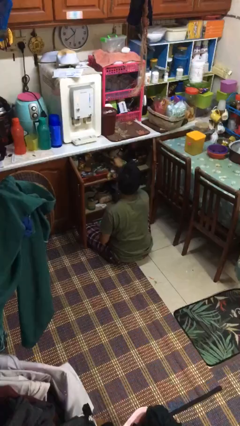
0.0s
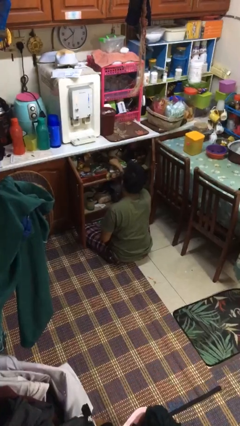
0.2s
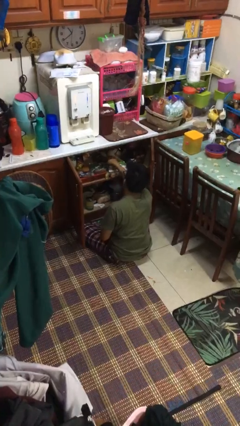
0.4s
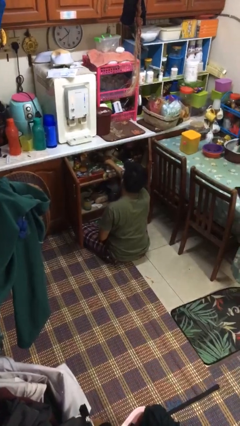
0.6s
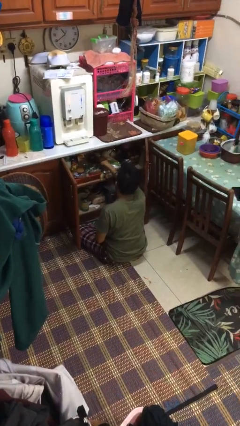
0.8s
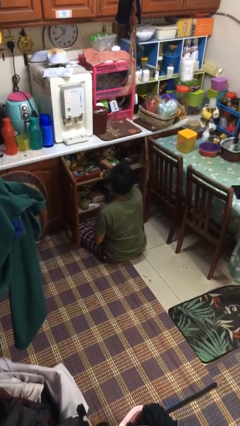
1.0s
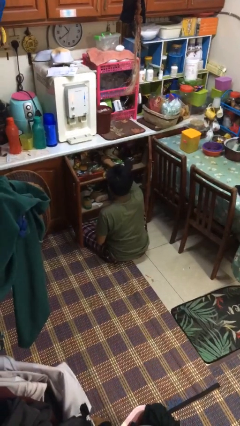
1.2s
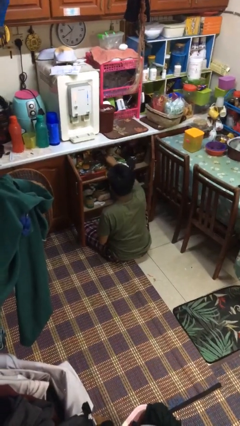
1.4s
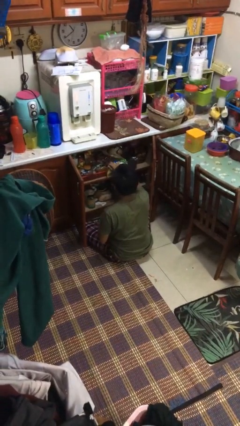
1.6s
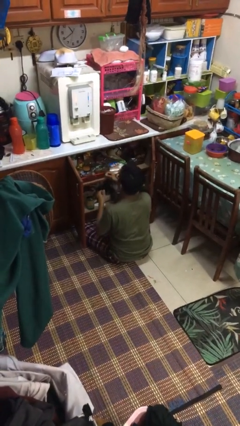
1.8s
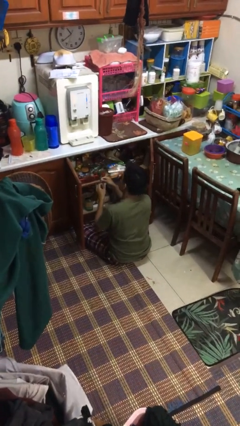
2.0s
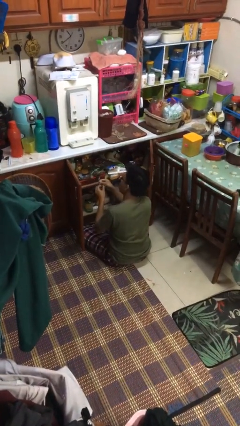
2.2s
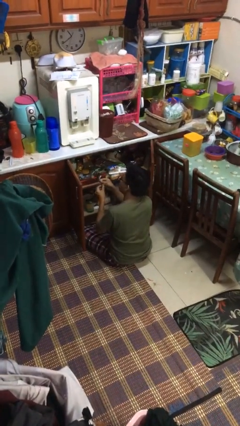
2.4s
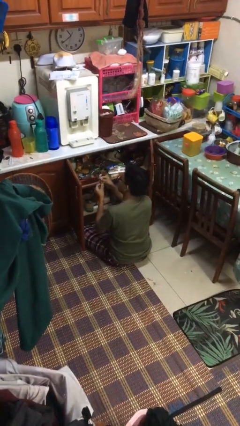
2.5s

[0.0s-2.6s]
person takes object from kitchen drawer

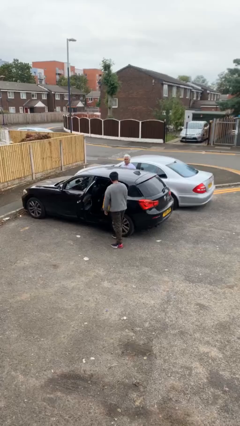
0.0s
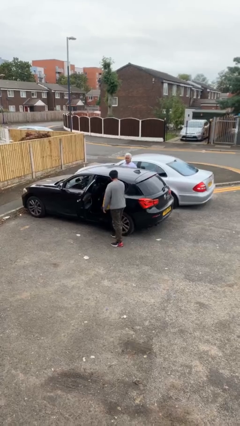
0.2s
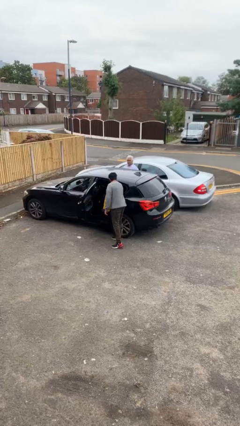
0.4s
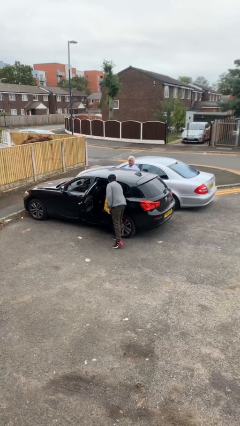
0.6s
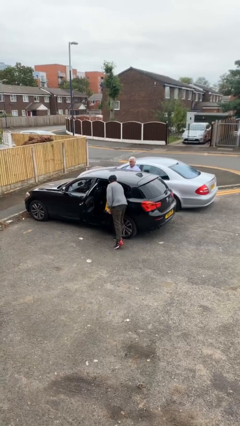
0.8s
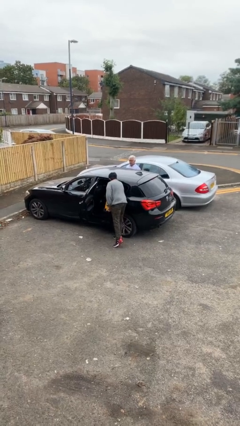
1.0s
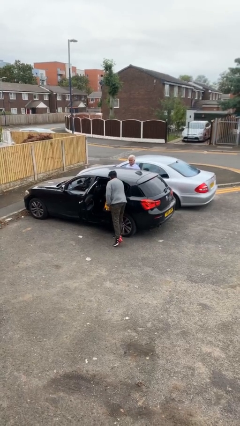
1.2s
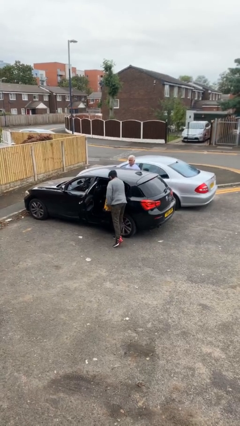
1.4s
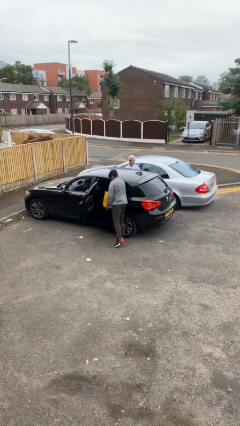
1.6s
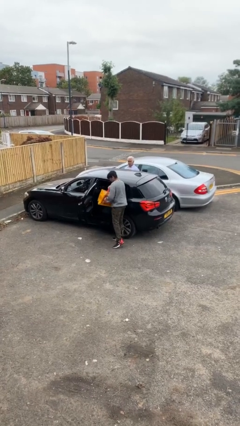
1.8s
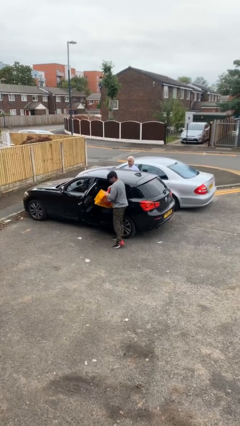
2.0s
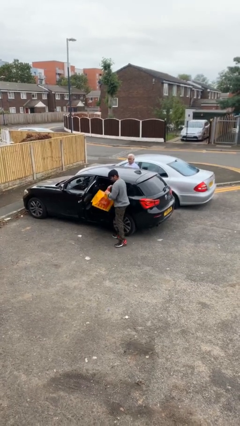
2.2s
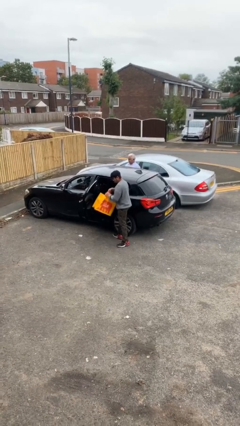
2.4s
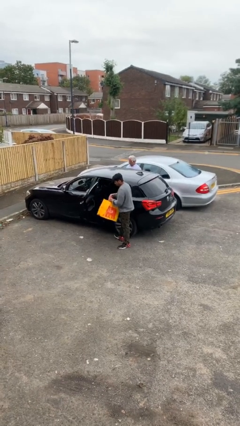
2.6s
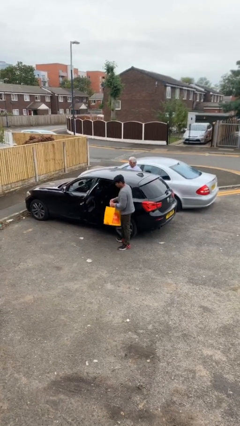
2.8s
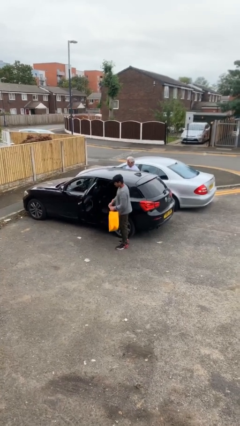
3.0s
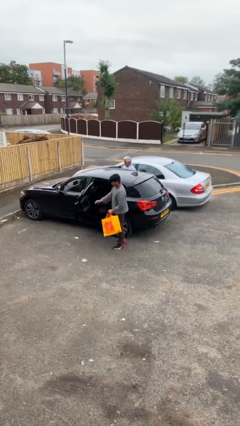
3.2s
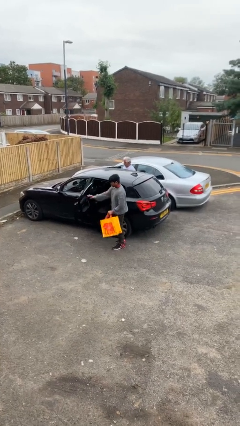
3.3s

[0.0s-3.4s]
person unloads car

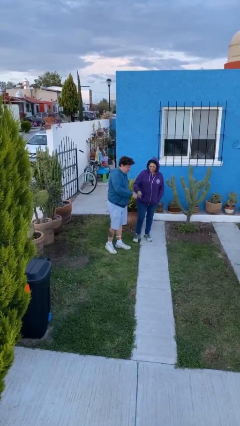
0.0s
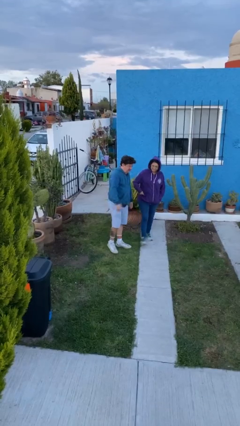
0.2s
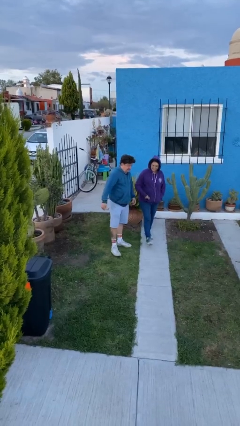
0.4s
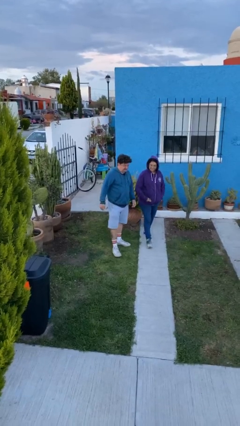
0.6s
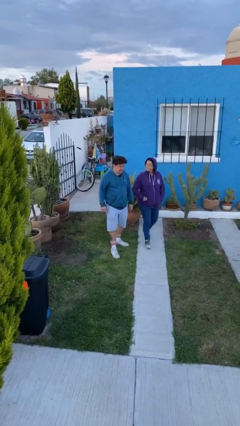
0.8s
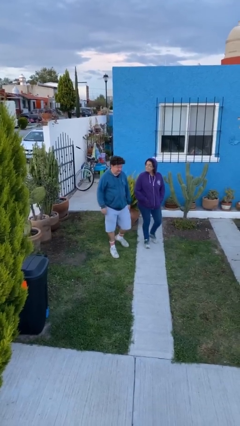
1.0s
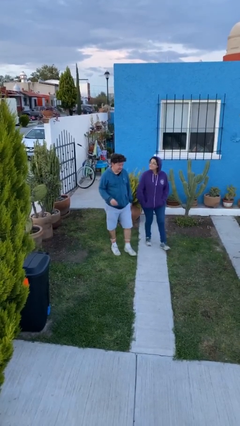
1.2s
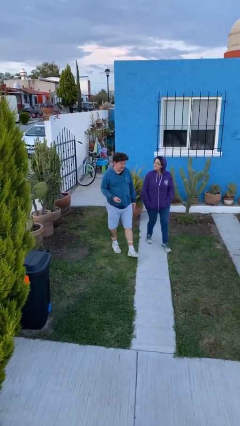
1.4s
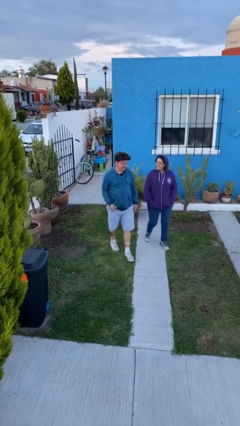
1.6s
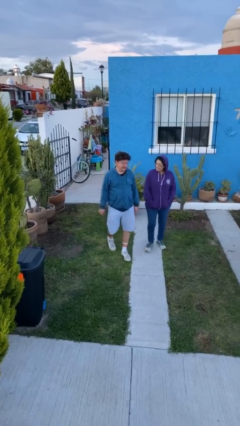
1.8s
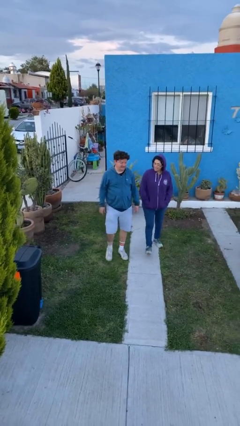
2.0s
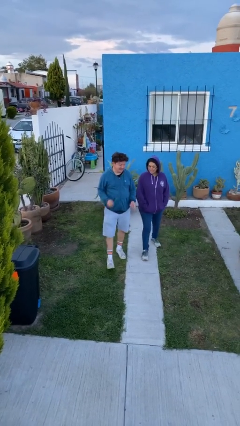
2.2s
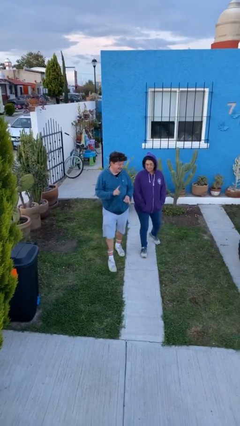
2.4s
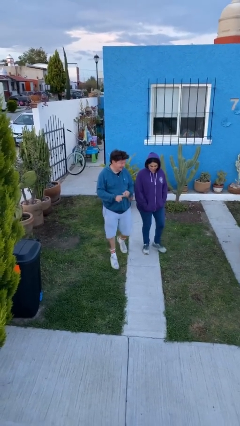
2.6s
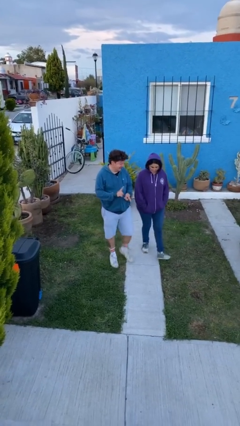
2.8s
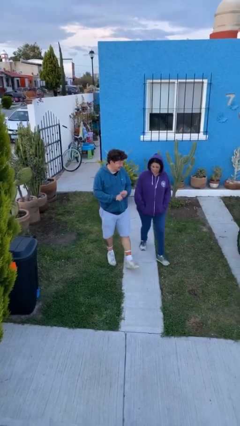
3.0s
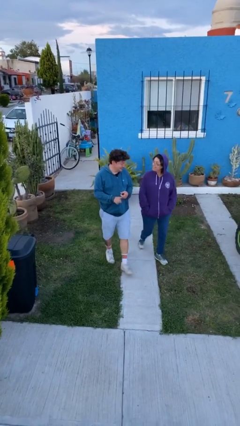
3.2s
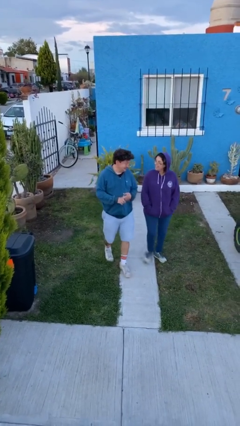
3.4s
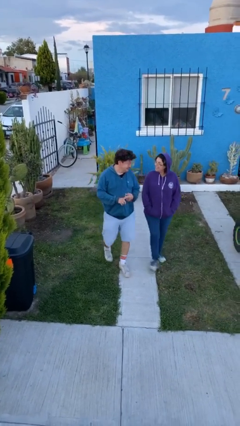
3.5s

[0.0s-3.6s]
person talks to person

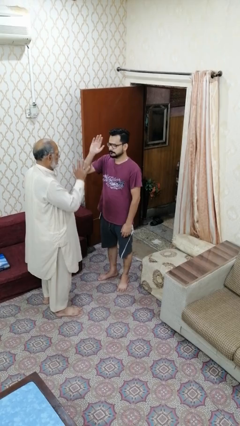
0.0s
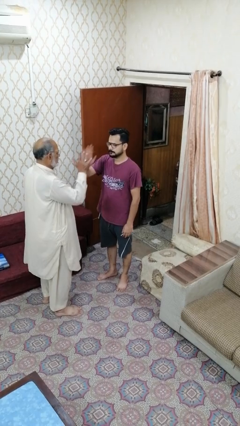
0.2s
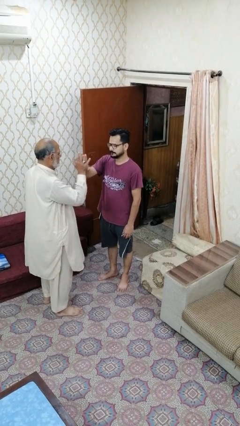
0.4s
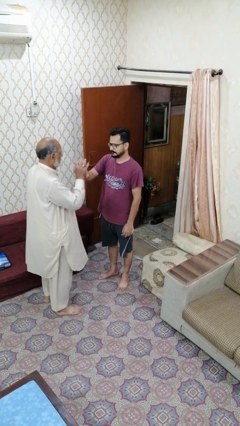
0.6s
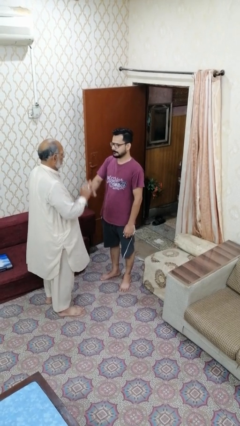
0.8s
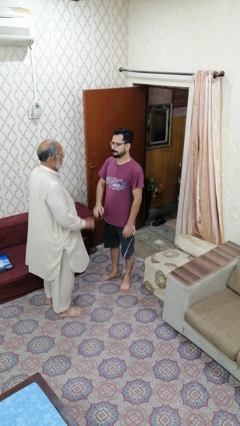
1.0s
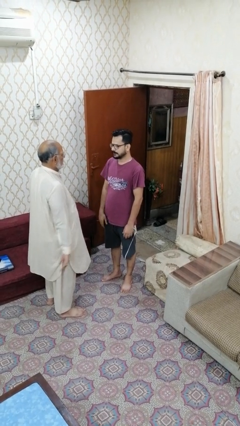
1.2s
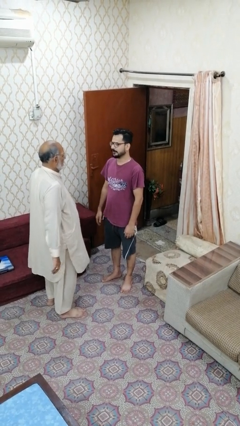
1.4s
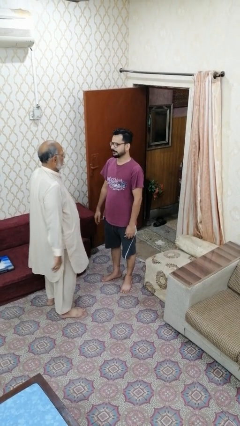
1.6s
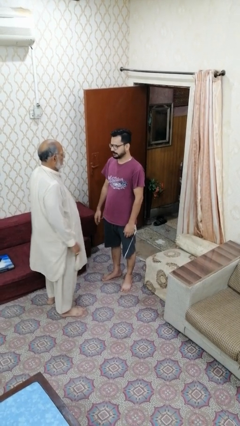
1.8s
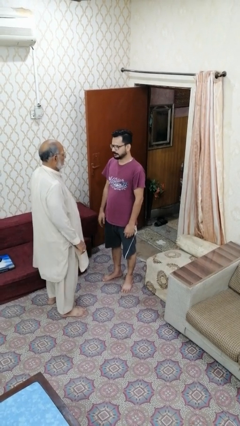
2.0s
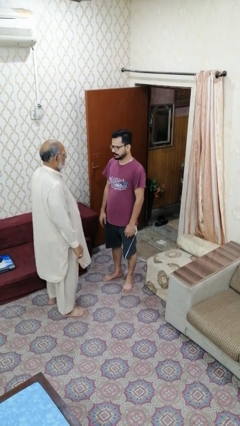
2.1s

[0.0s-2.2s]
person highfives hand

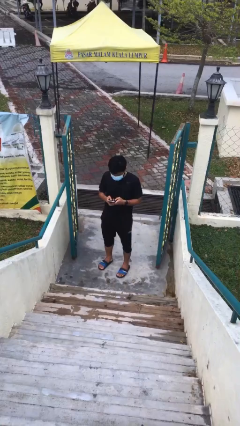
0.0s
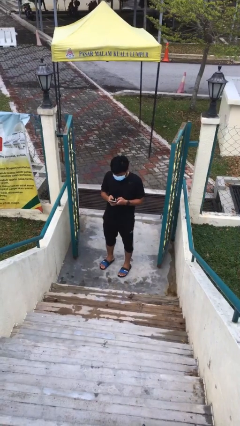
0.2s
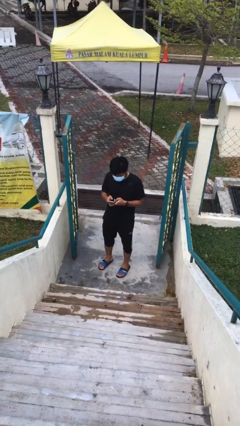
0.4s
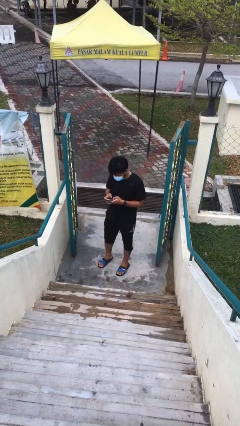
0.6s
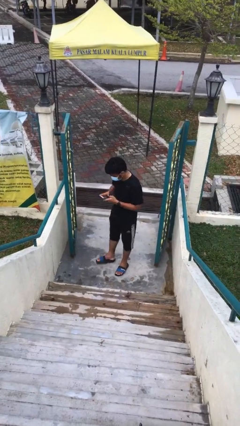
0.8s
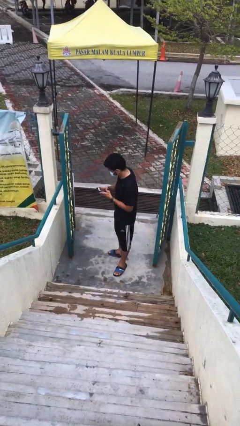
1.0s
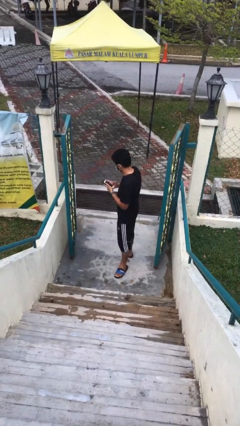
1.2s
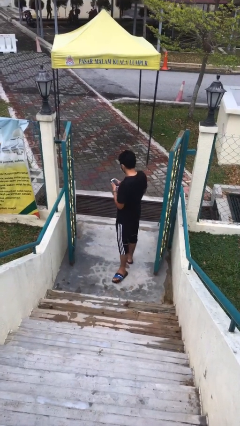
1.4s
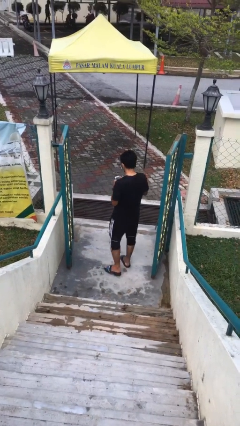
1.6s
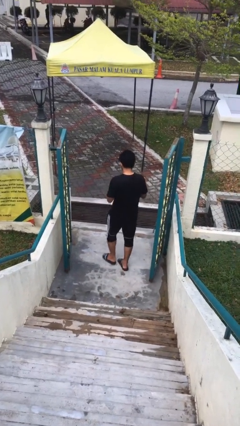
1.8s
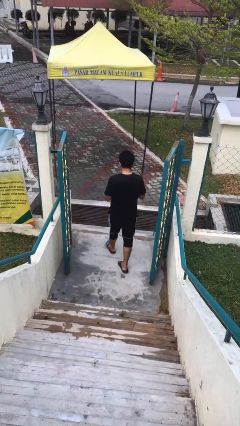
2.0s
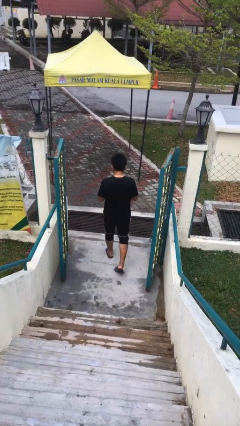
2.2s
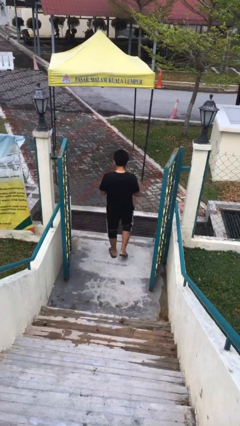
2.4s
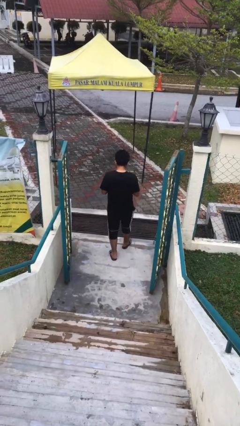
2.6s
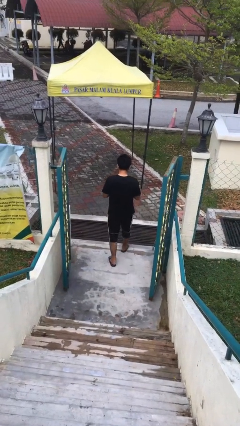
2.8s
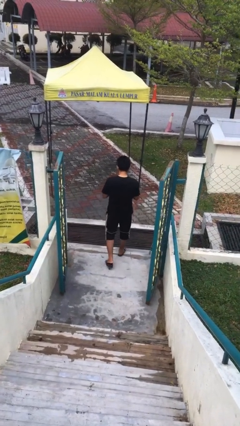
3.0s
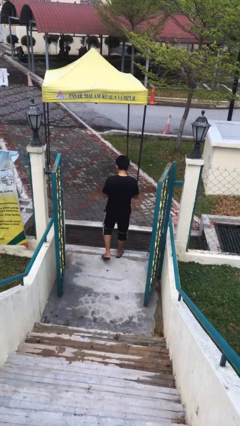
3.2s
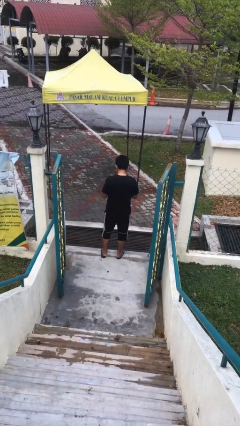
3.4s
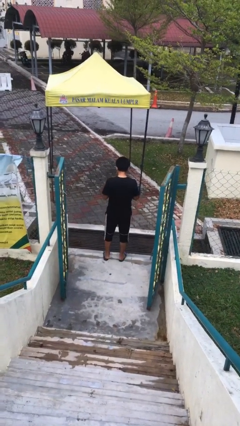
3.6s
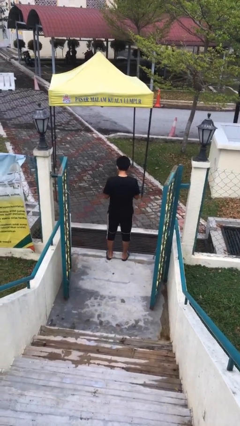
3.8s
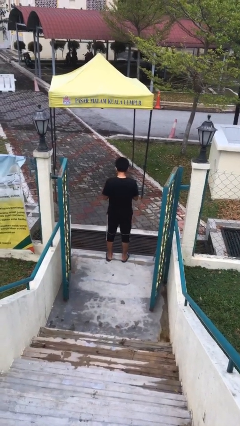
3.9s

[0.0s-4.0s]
person exits scene through structure

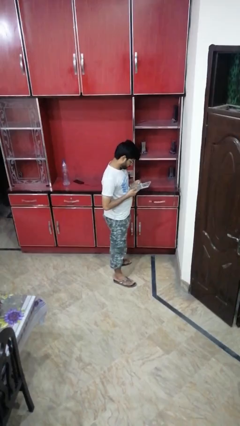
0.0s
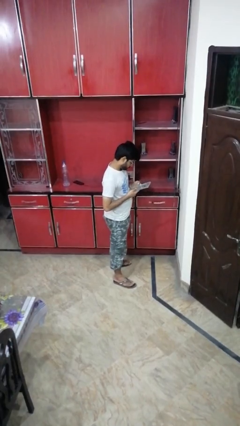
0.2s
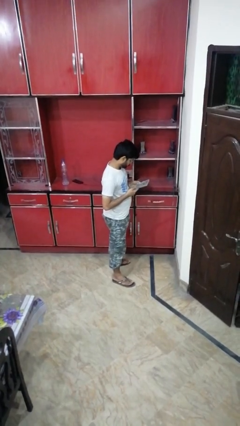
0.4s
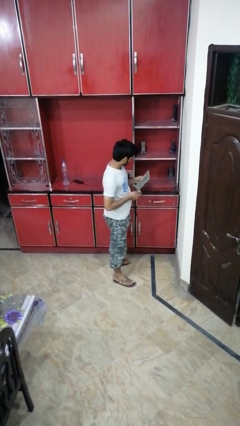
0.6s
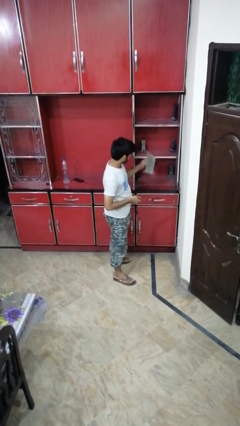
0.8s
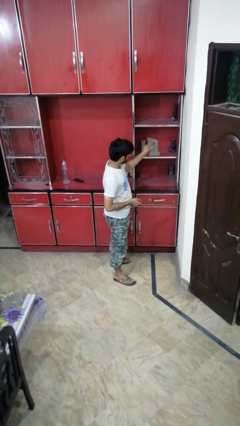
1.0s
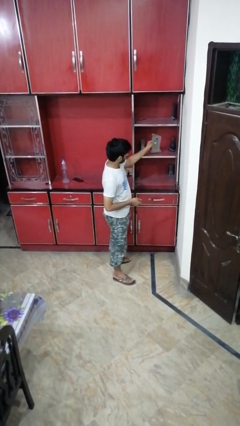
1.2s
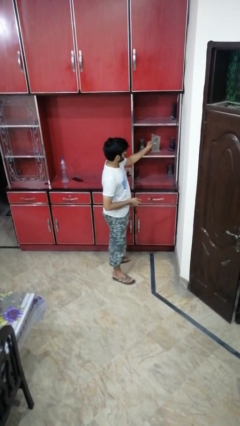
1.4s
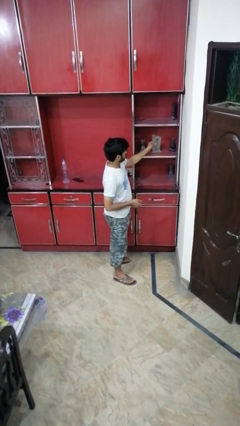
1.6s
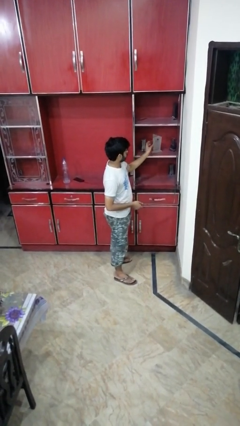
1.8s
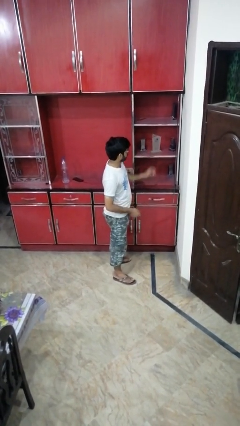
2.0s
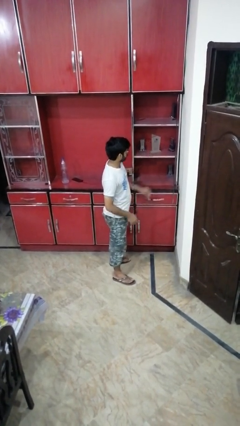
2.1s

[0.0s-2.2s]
person puts down object into cabinet
